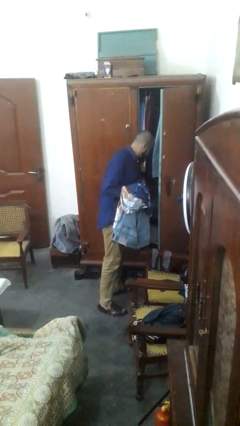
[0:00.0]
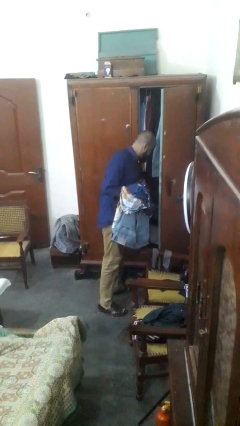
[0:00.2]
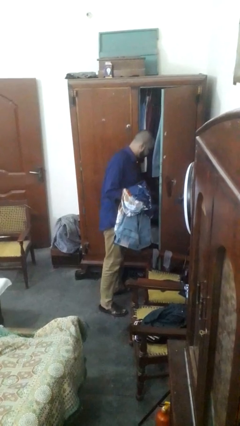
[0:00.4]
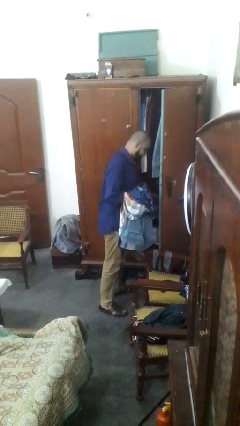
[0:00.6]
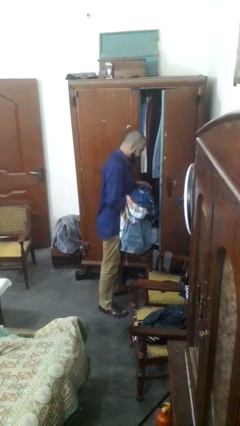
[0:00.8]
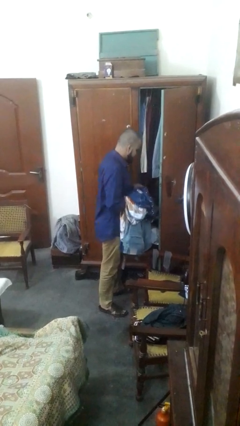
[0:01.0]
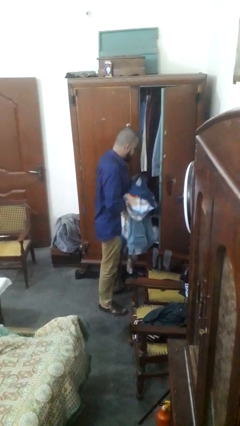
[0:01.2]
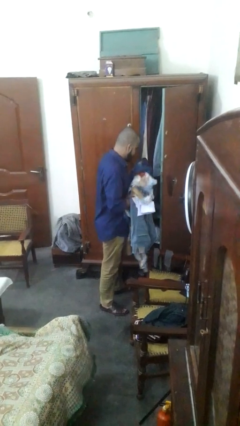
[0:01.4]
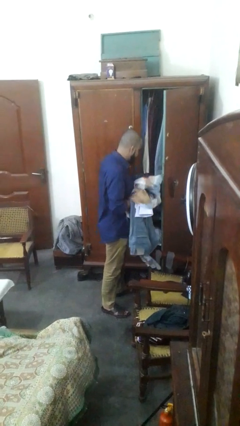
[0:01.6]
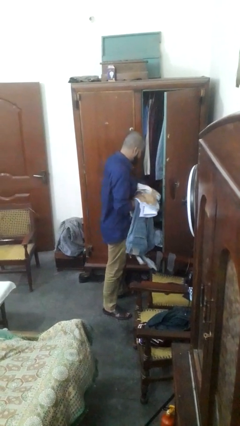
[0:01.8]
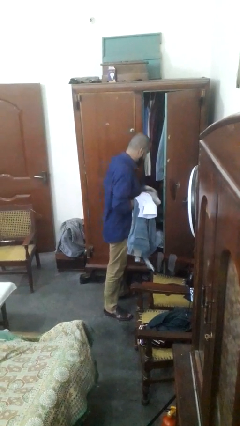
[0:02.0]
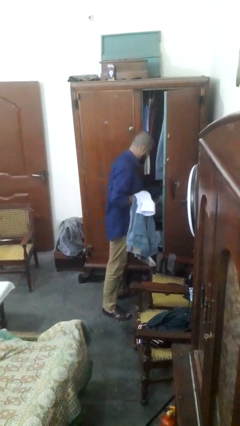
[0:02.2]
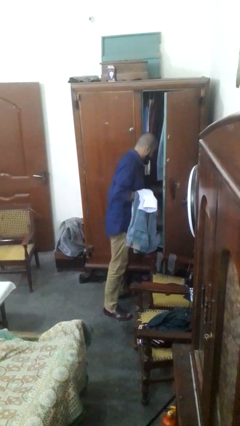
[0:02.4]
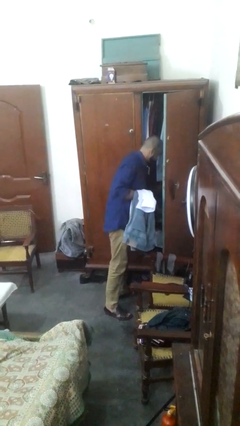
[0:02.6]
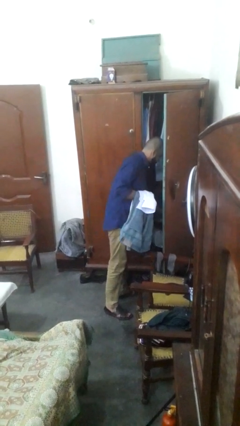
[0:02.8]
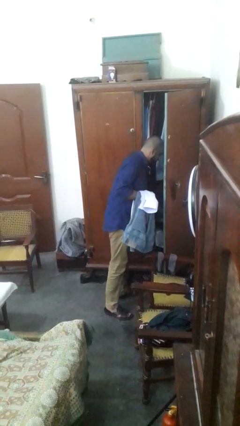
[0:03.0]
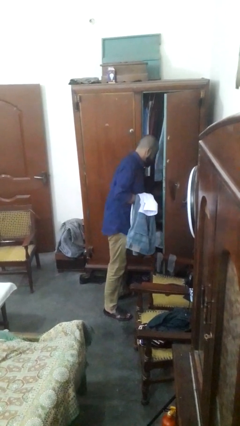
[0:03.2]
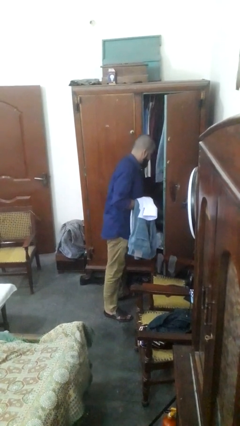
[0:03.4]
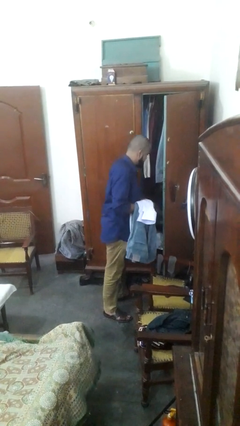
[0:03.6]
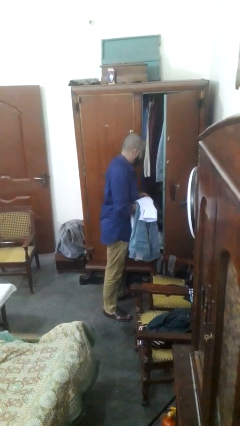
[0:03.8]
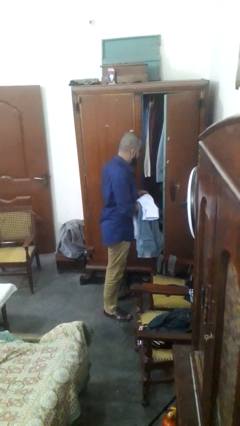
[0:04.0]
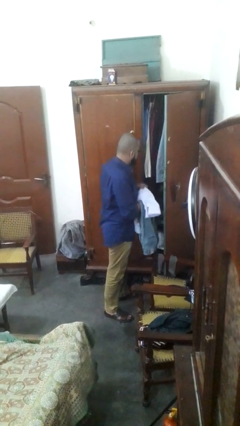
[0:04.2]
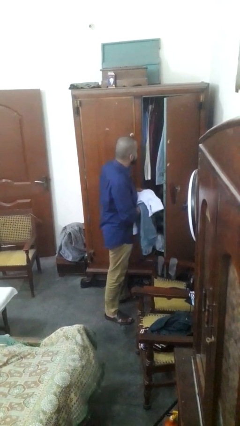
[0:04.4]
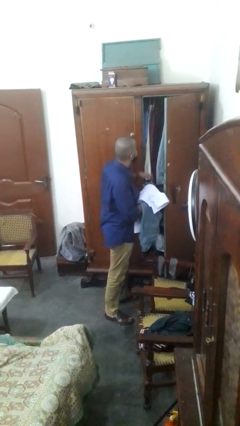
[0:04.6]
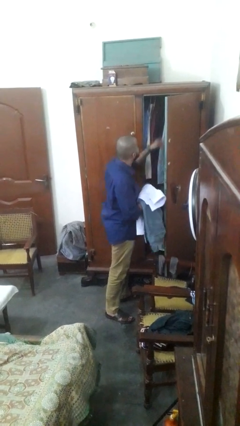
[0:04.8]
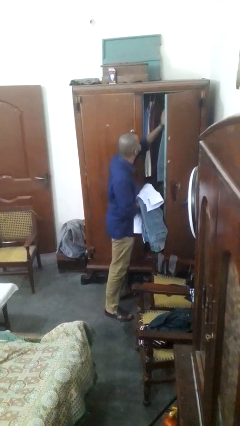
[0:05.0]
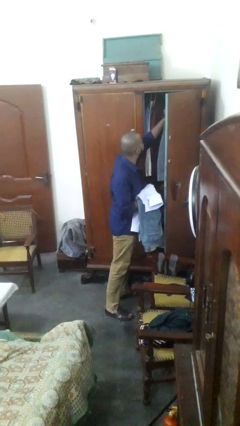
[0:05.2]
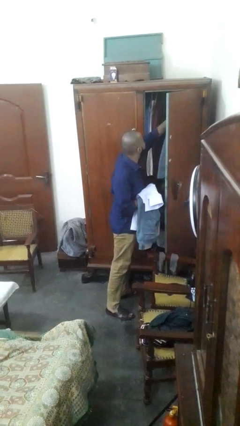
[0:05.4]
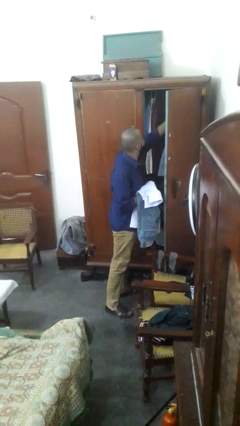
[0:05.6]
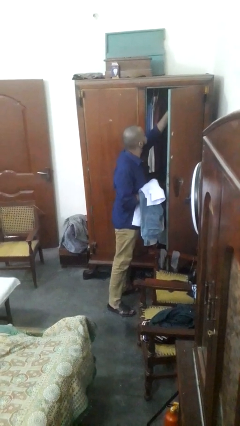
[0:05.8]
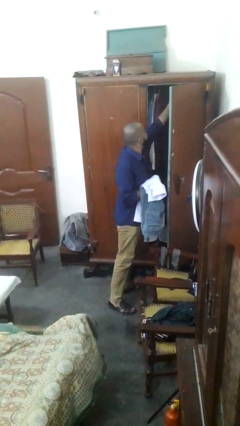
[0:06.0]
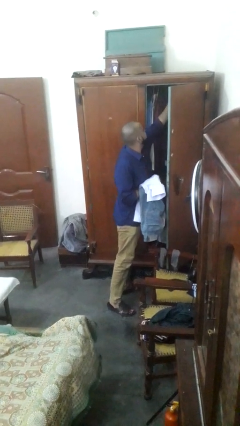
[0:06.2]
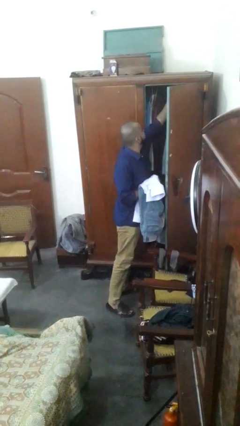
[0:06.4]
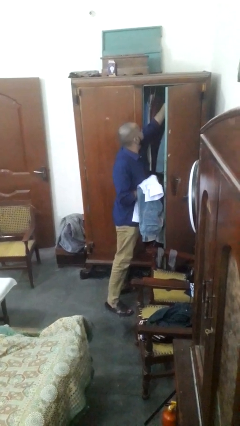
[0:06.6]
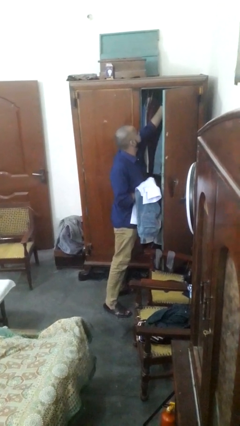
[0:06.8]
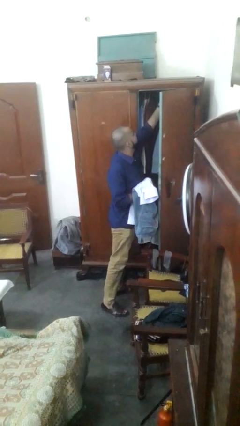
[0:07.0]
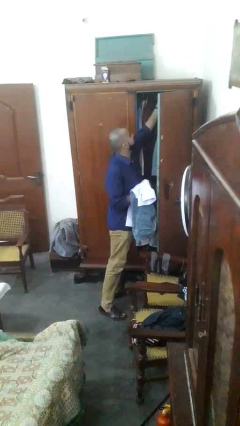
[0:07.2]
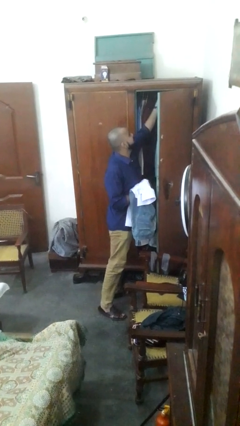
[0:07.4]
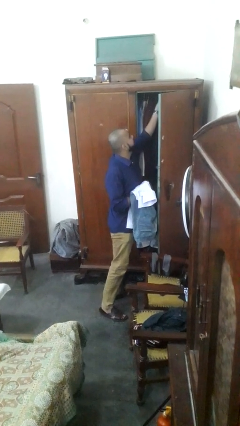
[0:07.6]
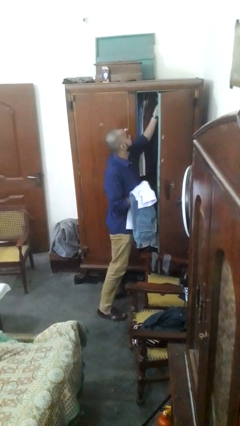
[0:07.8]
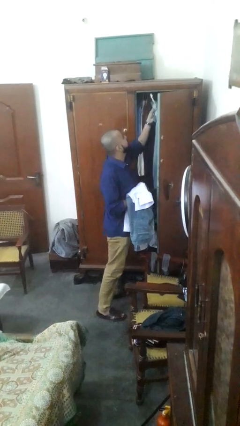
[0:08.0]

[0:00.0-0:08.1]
person puts clothes into dresser

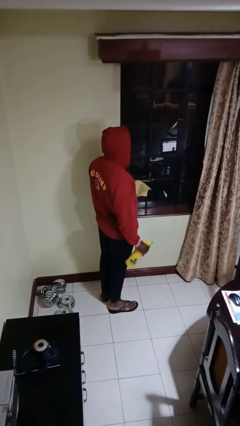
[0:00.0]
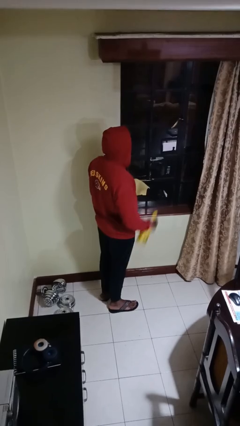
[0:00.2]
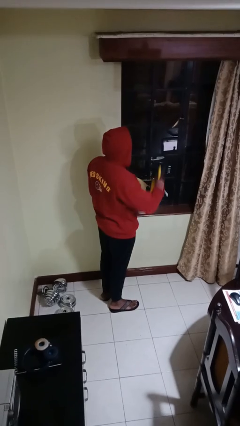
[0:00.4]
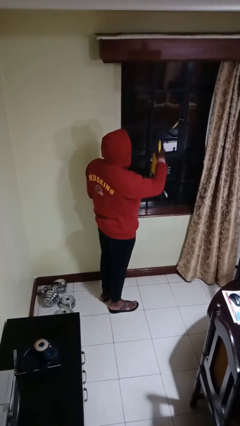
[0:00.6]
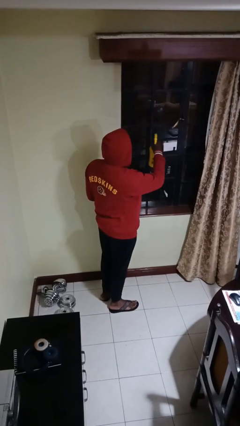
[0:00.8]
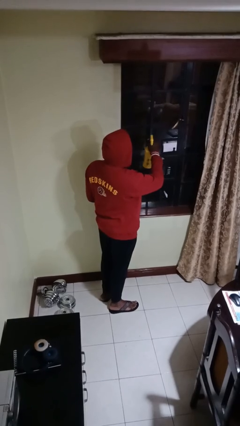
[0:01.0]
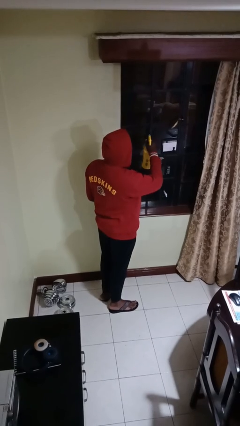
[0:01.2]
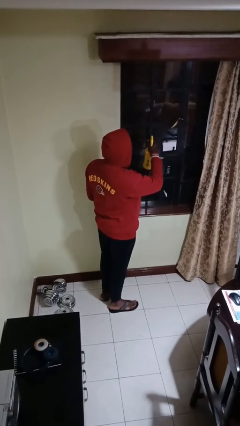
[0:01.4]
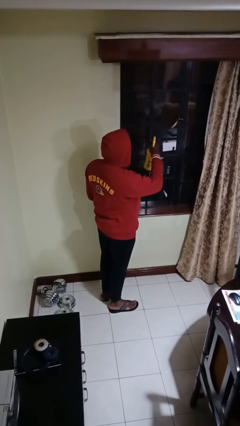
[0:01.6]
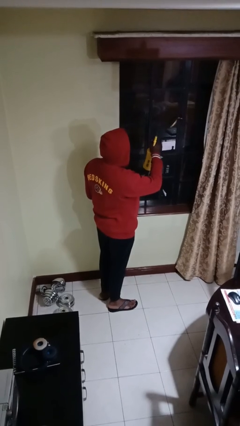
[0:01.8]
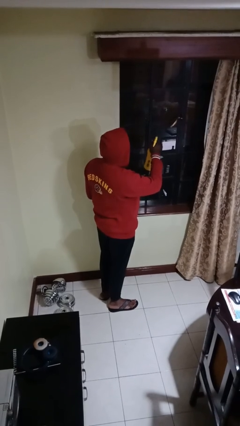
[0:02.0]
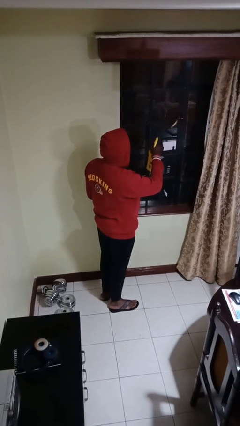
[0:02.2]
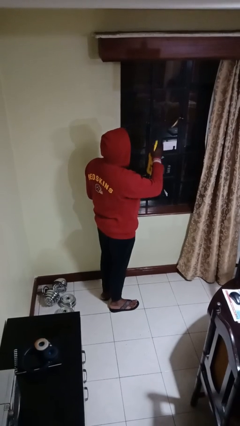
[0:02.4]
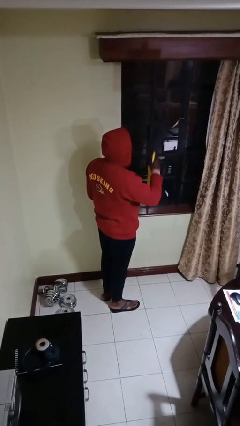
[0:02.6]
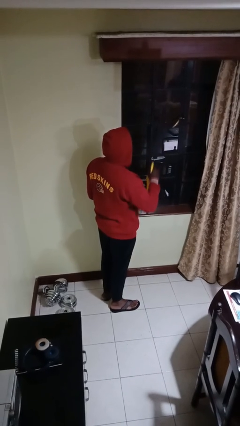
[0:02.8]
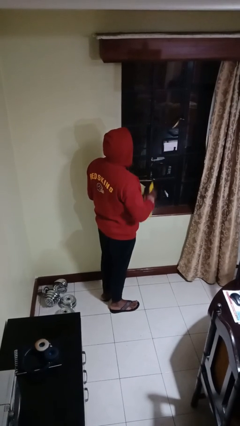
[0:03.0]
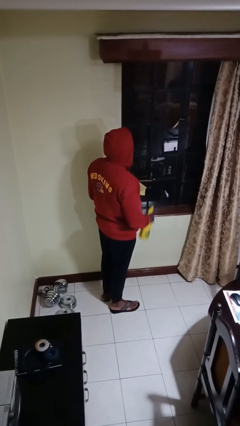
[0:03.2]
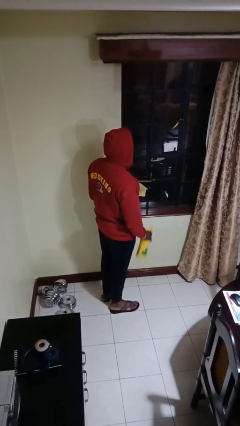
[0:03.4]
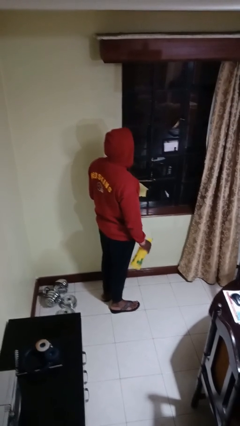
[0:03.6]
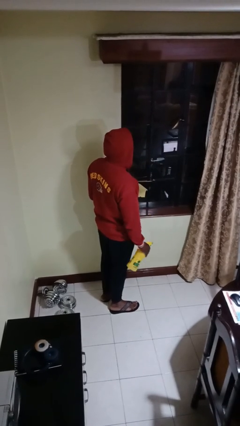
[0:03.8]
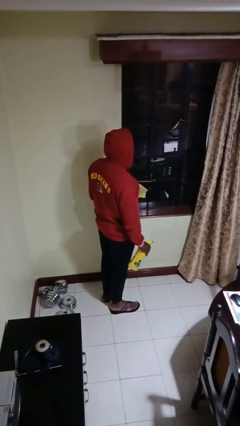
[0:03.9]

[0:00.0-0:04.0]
person sprays from bottle

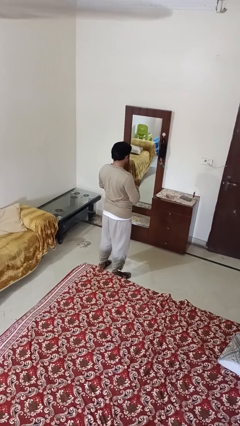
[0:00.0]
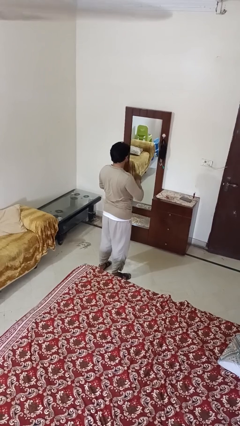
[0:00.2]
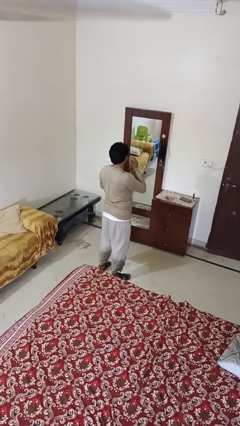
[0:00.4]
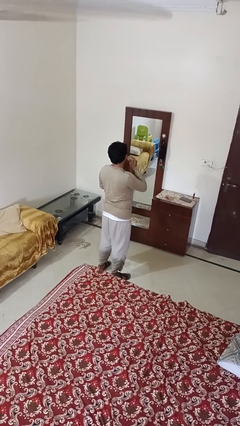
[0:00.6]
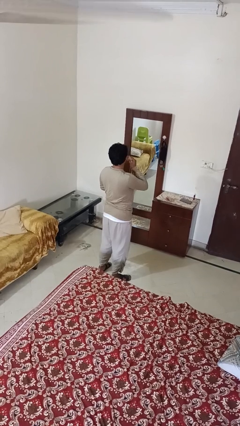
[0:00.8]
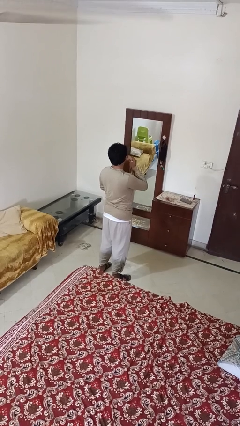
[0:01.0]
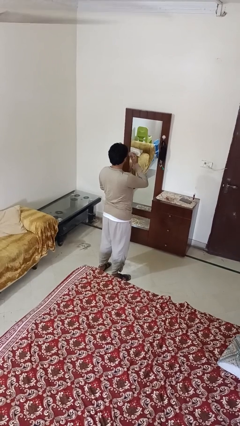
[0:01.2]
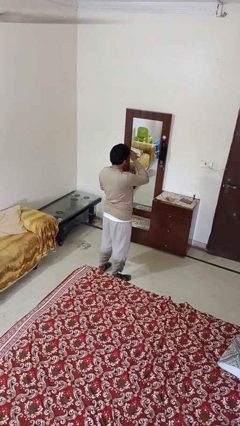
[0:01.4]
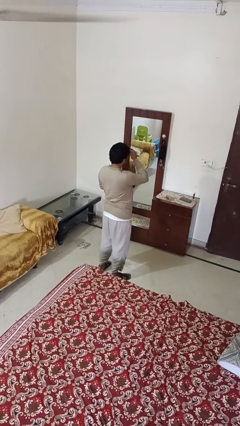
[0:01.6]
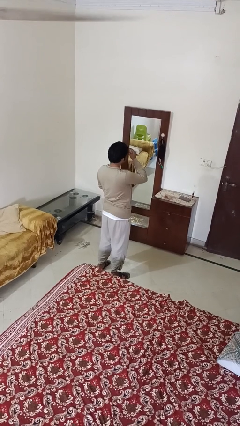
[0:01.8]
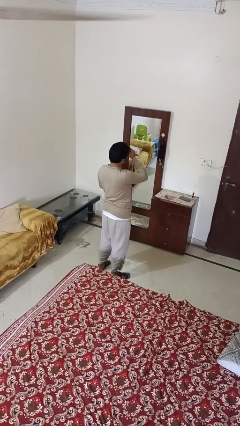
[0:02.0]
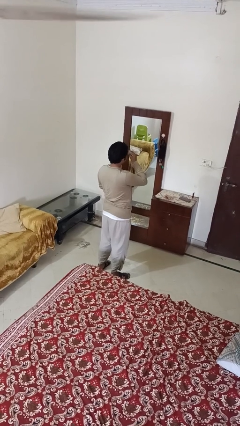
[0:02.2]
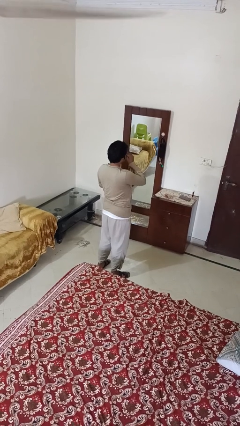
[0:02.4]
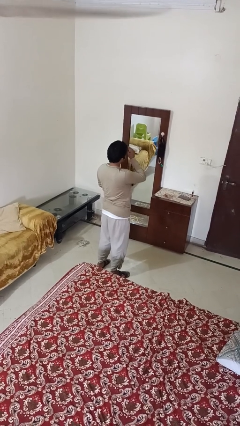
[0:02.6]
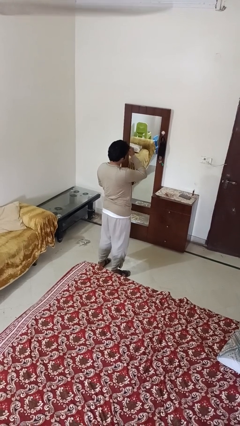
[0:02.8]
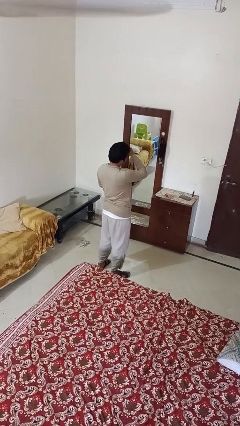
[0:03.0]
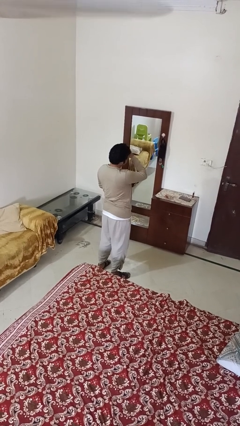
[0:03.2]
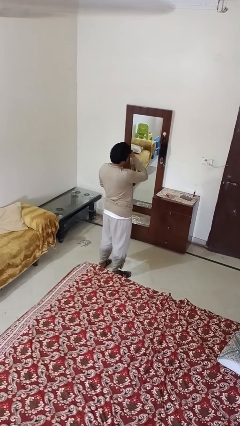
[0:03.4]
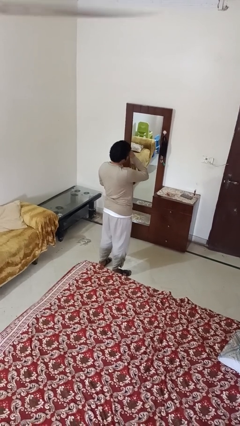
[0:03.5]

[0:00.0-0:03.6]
person applies foundation makeup

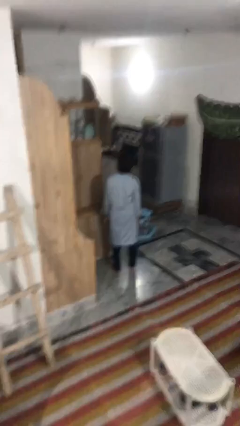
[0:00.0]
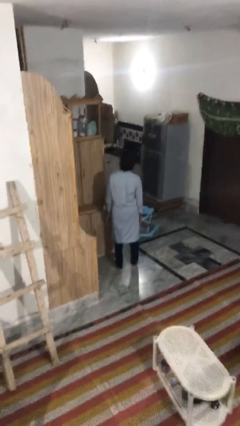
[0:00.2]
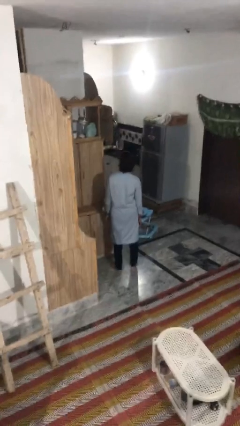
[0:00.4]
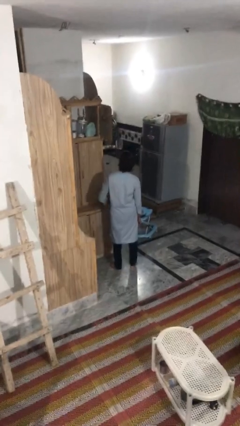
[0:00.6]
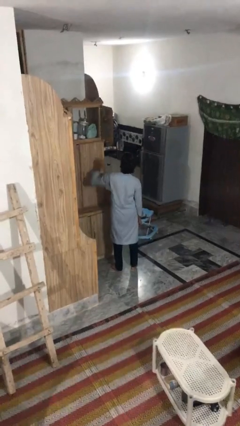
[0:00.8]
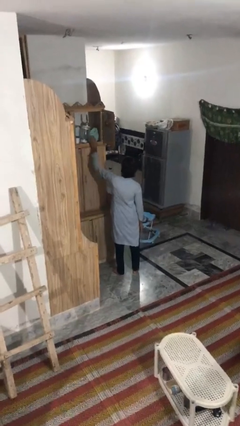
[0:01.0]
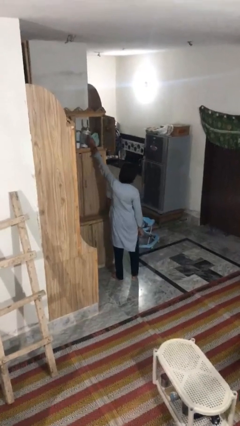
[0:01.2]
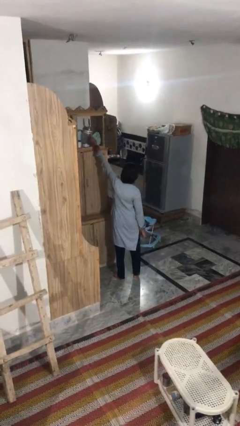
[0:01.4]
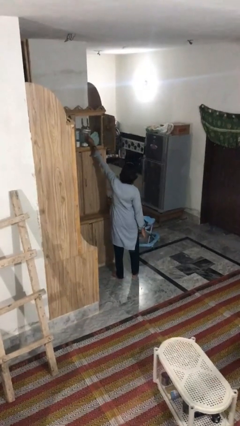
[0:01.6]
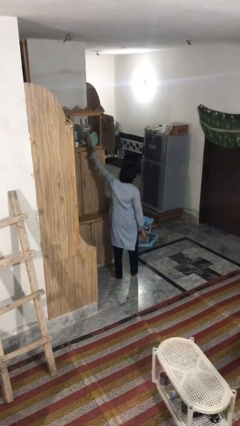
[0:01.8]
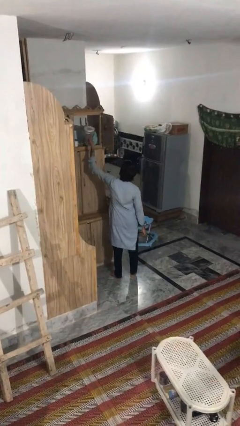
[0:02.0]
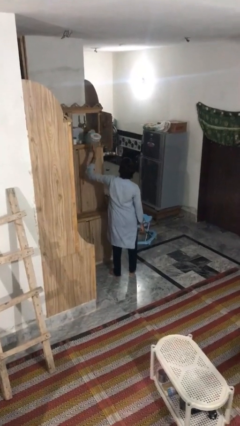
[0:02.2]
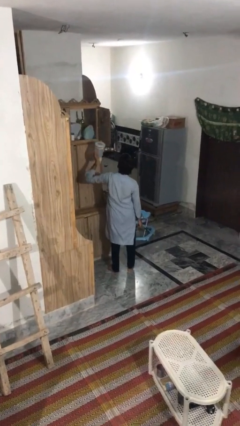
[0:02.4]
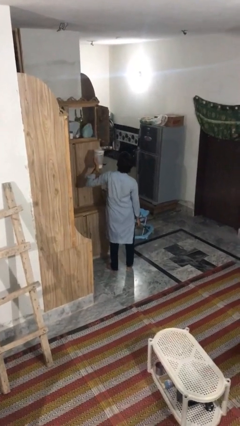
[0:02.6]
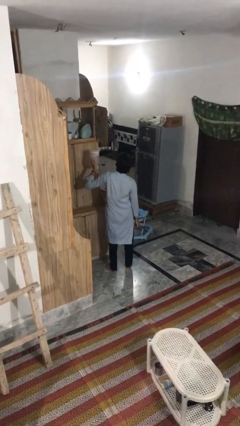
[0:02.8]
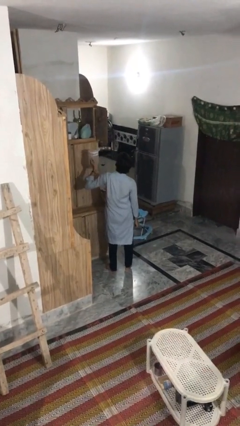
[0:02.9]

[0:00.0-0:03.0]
person picks up object from shelf
